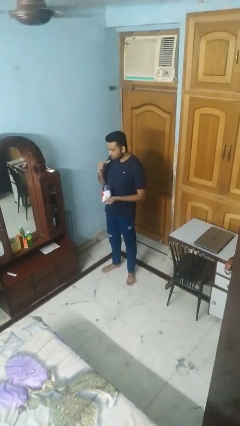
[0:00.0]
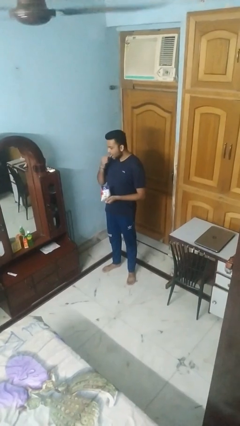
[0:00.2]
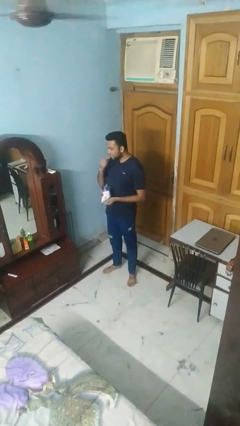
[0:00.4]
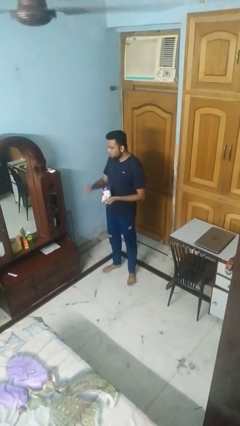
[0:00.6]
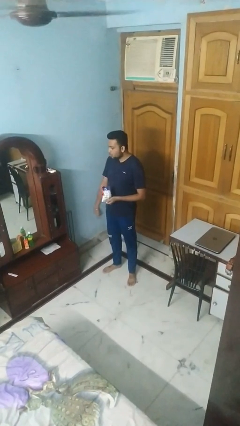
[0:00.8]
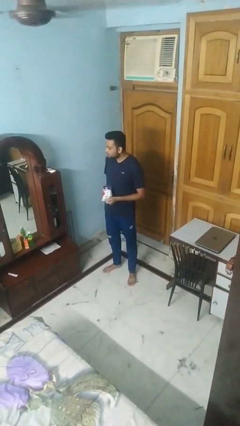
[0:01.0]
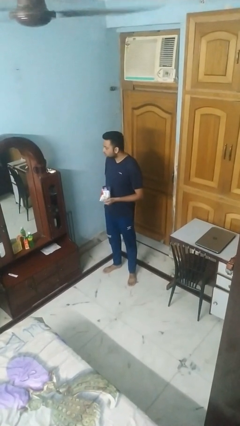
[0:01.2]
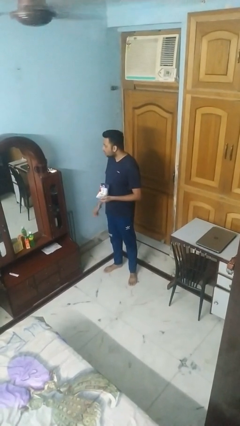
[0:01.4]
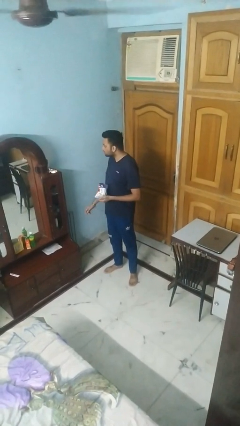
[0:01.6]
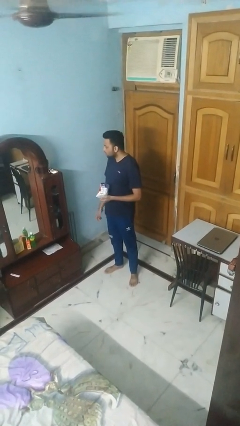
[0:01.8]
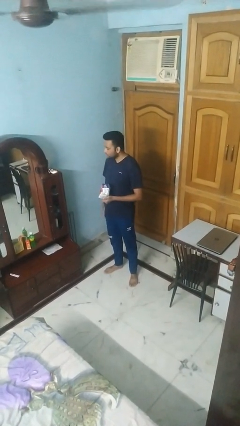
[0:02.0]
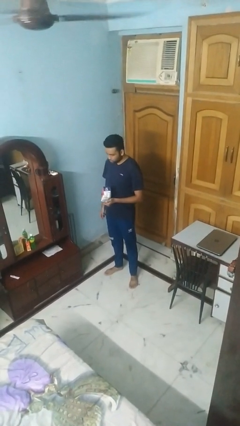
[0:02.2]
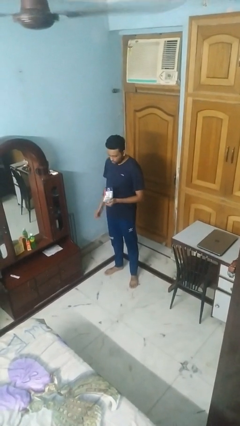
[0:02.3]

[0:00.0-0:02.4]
person eats snack from bag

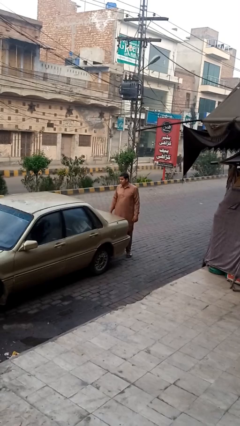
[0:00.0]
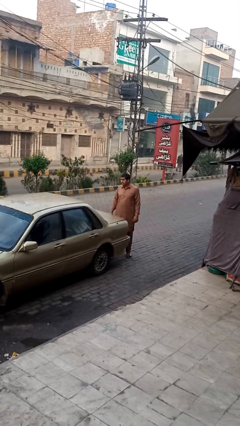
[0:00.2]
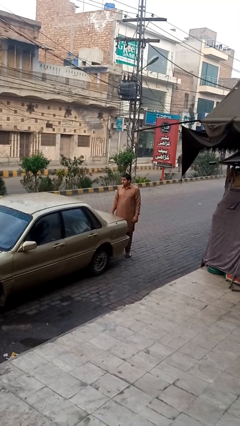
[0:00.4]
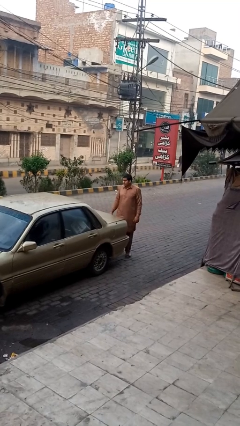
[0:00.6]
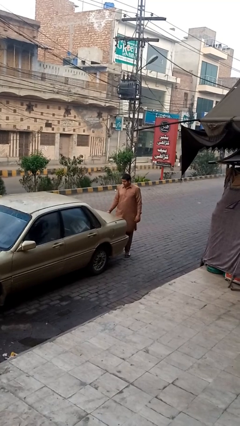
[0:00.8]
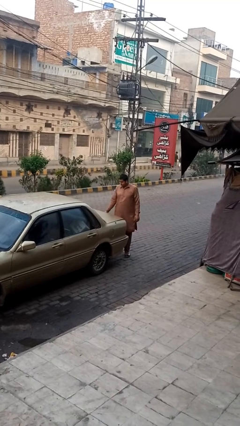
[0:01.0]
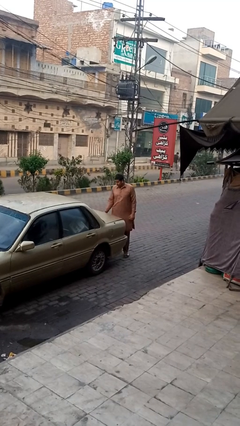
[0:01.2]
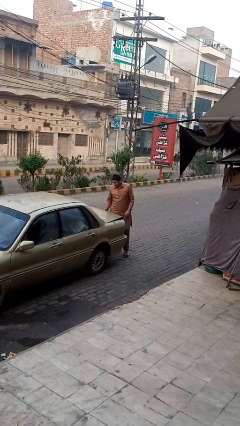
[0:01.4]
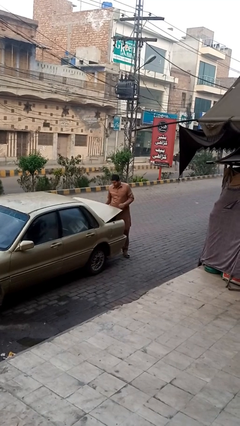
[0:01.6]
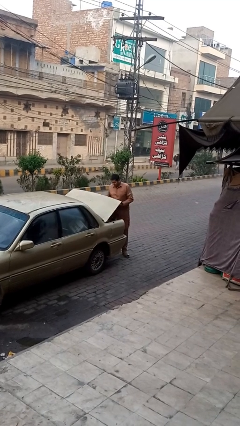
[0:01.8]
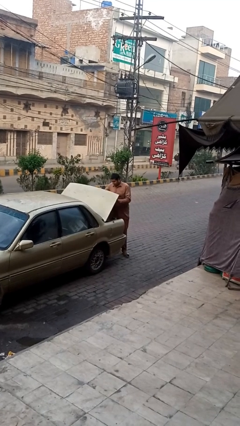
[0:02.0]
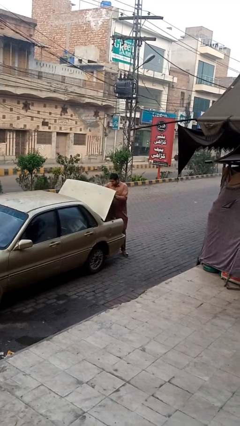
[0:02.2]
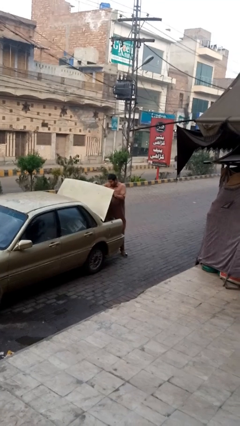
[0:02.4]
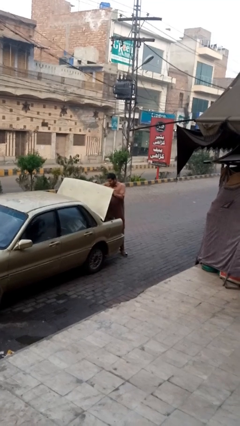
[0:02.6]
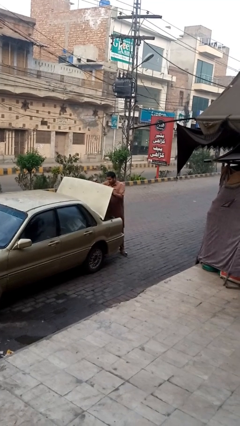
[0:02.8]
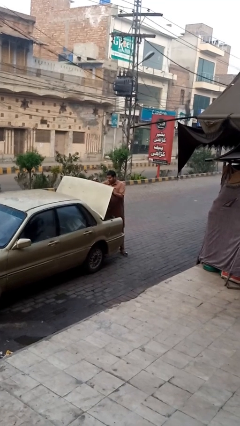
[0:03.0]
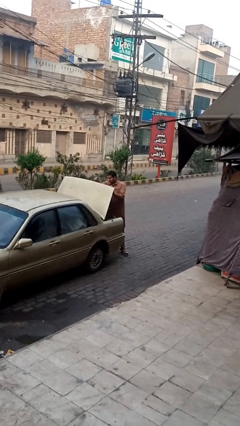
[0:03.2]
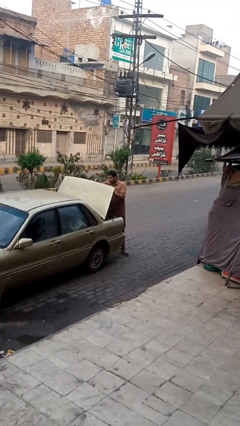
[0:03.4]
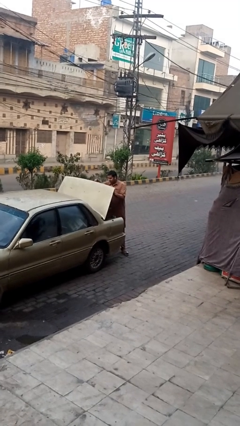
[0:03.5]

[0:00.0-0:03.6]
person opens car trunk

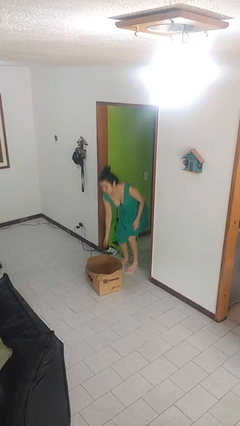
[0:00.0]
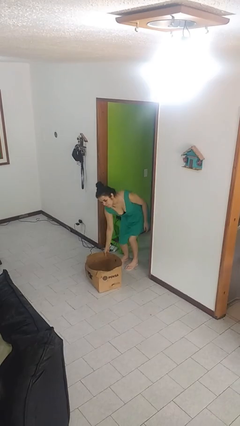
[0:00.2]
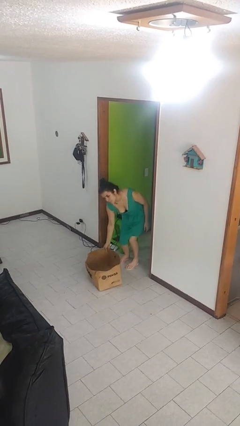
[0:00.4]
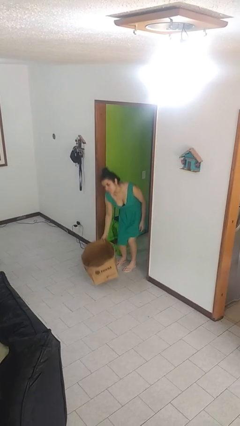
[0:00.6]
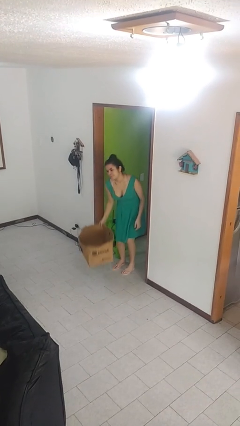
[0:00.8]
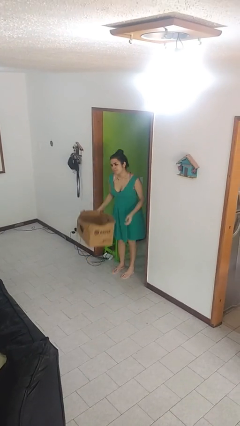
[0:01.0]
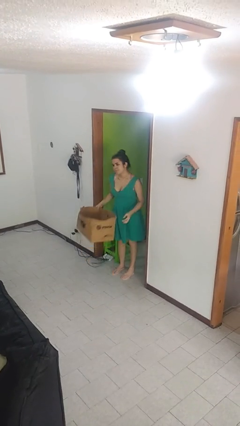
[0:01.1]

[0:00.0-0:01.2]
person picks up object from floor

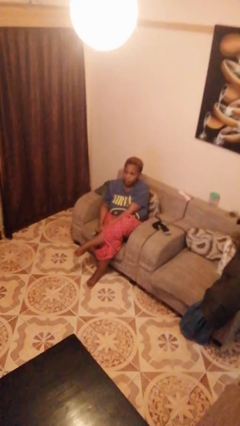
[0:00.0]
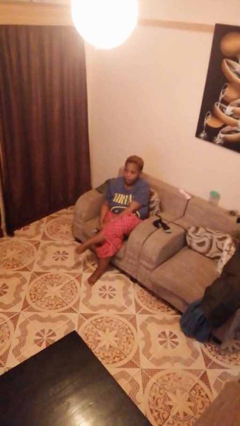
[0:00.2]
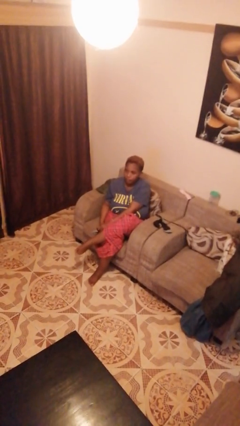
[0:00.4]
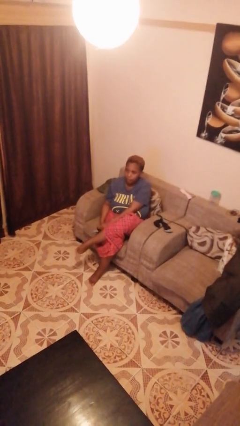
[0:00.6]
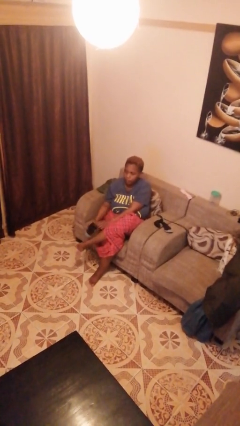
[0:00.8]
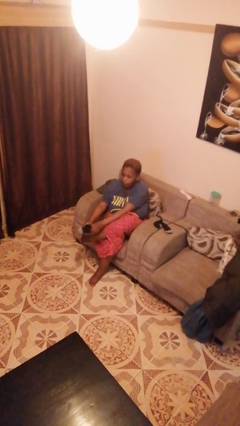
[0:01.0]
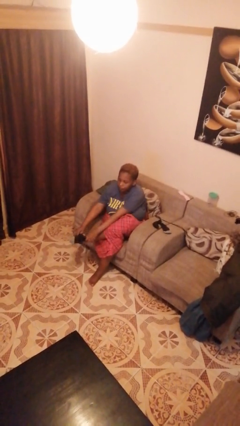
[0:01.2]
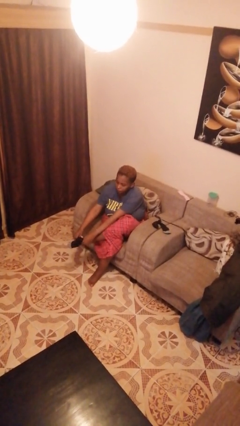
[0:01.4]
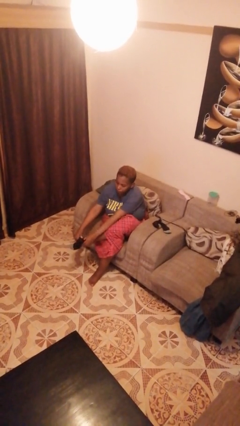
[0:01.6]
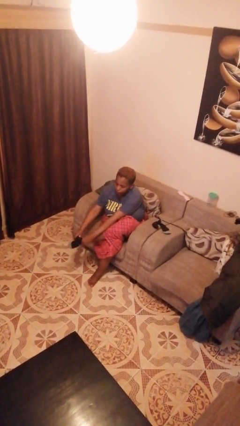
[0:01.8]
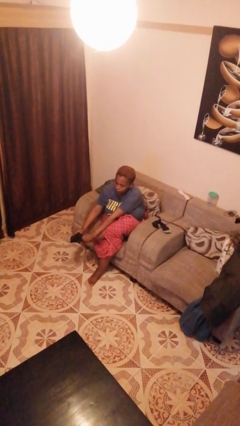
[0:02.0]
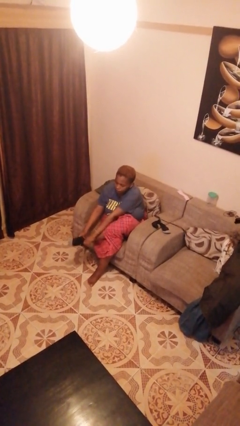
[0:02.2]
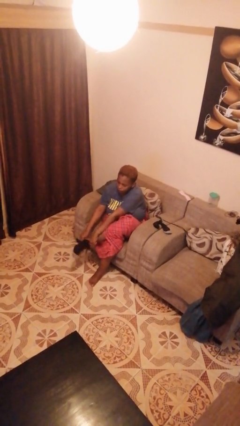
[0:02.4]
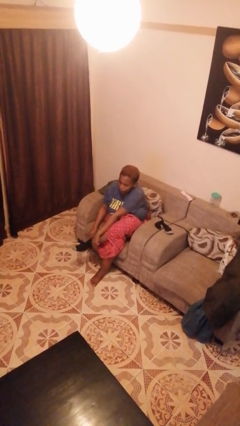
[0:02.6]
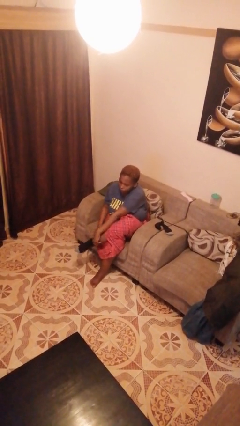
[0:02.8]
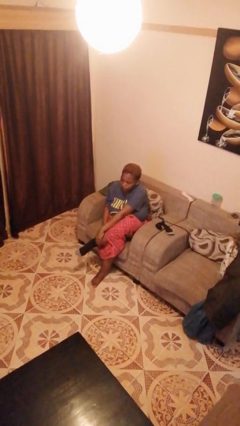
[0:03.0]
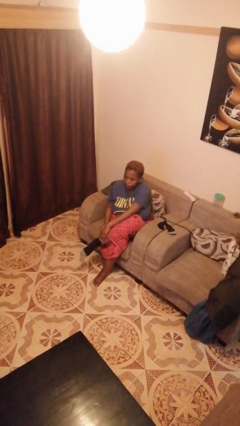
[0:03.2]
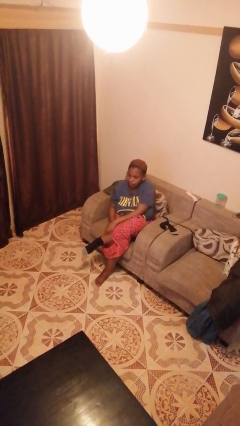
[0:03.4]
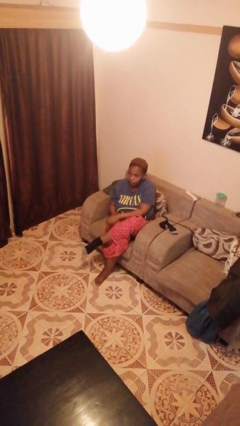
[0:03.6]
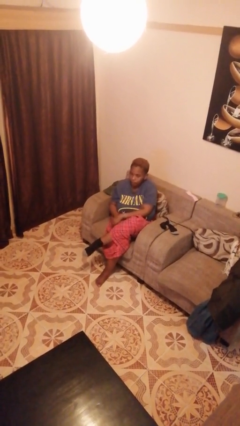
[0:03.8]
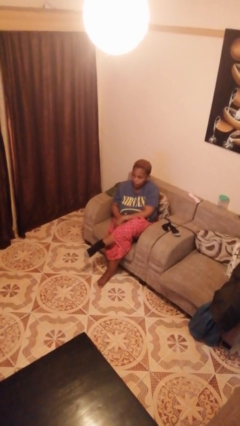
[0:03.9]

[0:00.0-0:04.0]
person puts on socks

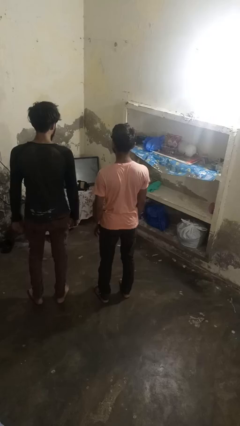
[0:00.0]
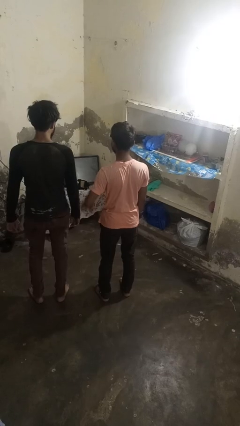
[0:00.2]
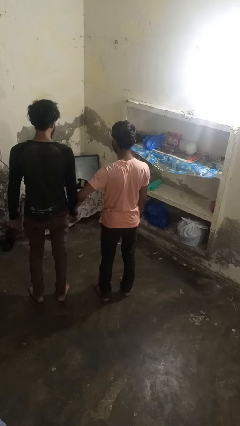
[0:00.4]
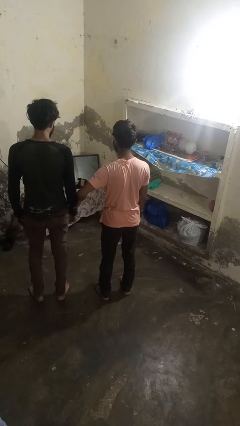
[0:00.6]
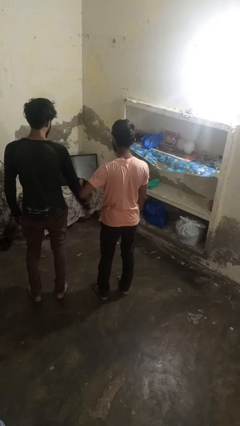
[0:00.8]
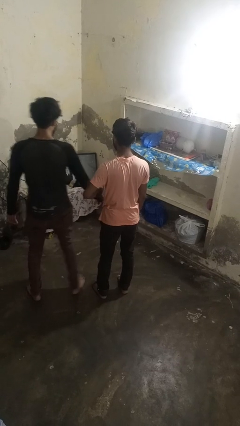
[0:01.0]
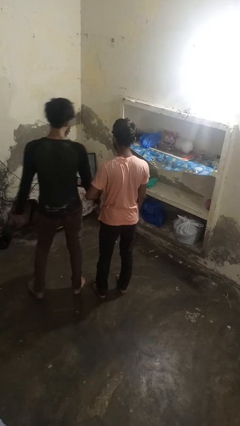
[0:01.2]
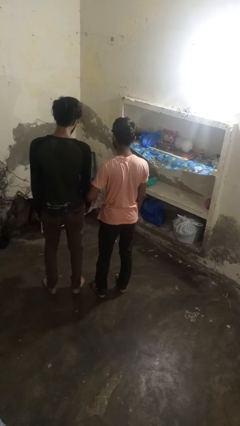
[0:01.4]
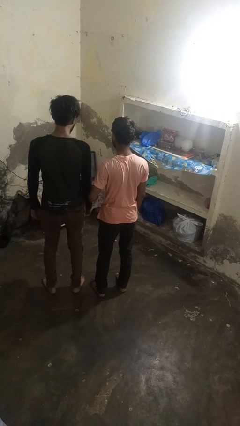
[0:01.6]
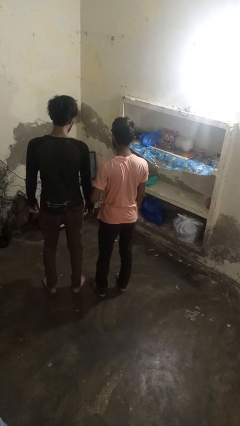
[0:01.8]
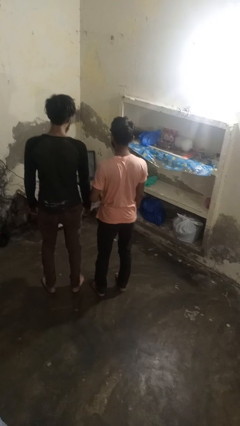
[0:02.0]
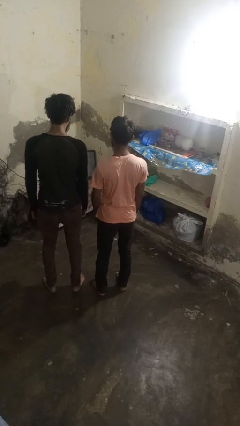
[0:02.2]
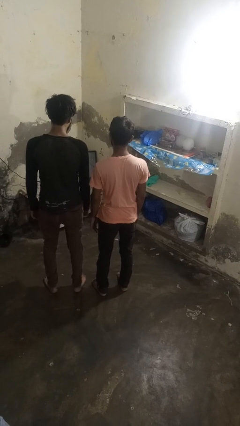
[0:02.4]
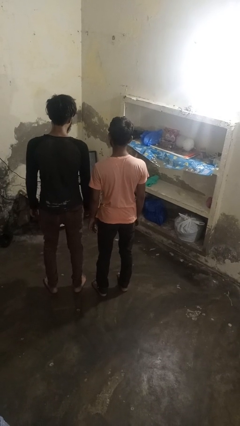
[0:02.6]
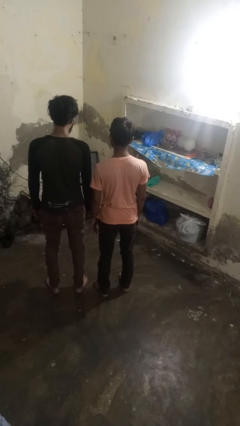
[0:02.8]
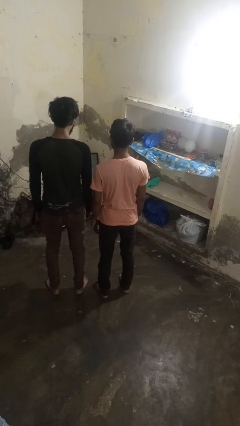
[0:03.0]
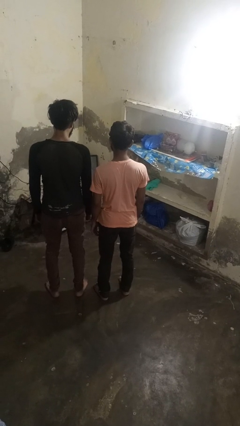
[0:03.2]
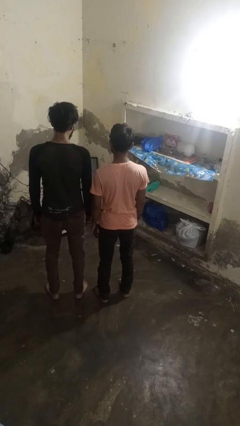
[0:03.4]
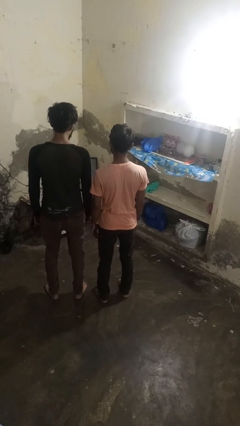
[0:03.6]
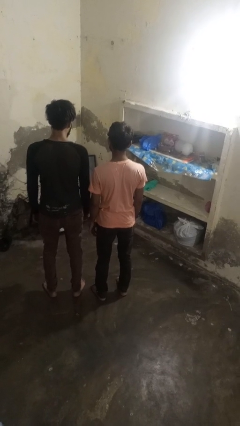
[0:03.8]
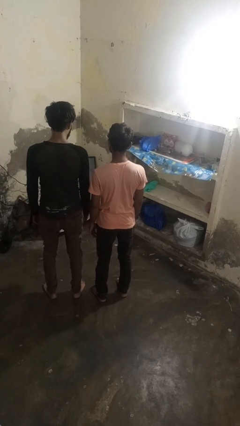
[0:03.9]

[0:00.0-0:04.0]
person grabs person by forearm

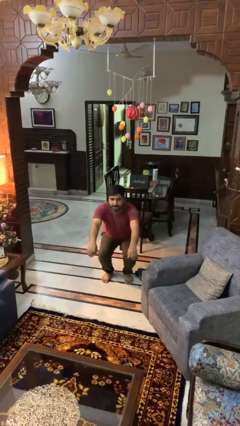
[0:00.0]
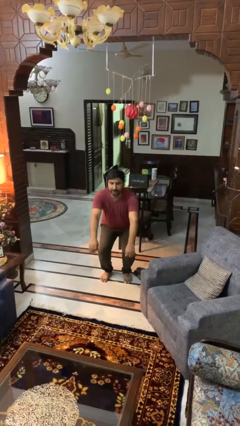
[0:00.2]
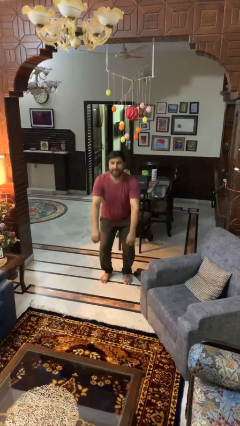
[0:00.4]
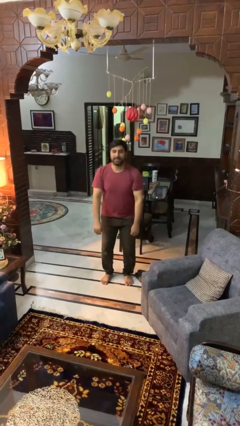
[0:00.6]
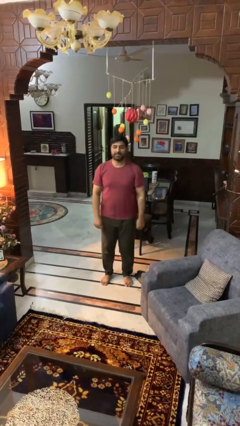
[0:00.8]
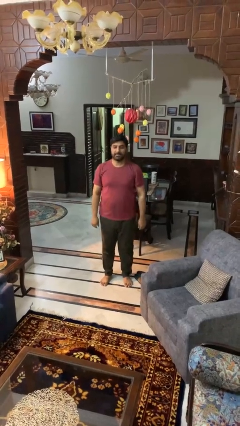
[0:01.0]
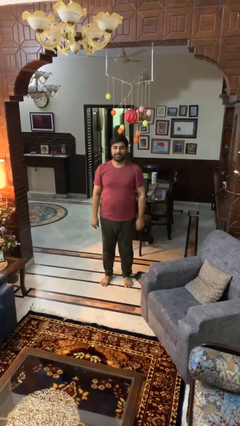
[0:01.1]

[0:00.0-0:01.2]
person stands up

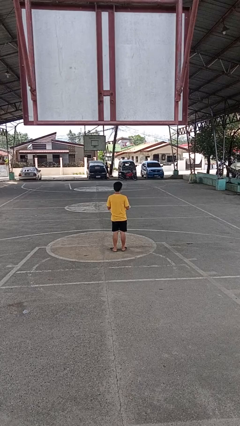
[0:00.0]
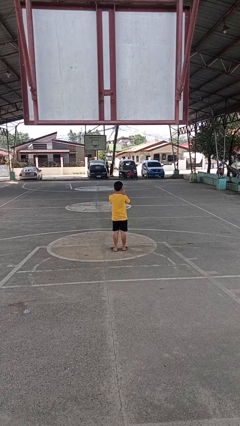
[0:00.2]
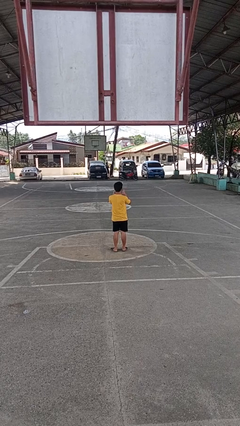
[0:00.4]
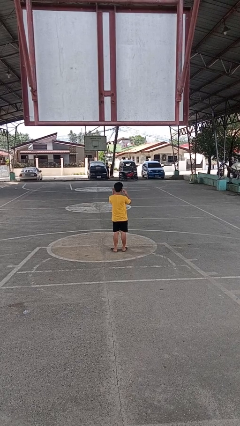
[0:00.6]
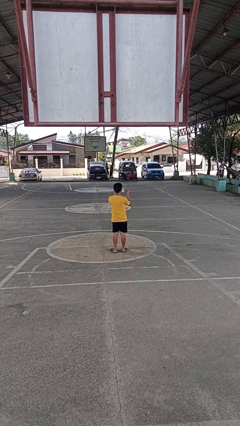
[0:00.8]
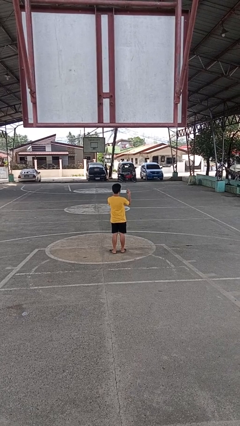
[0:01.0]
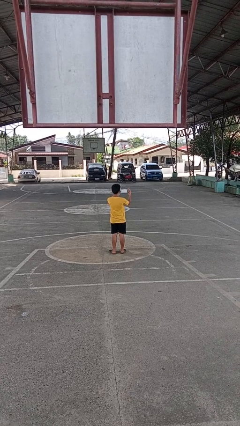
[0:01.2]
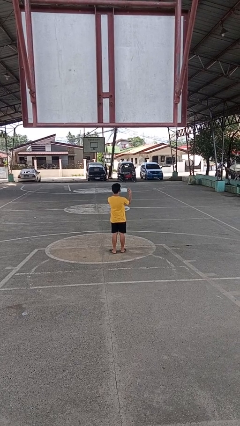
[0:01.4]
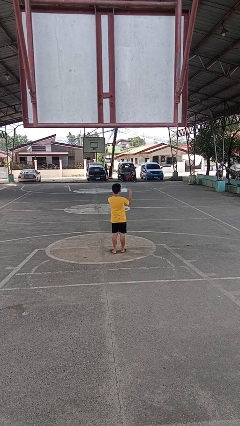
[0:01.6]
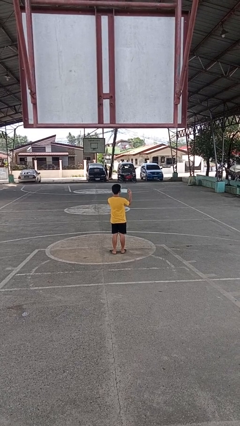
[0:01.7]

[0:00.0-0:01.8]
person takes off facemask
